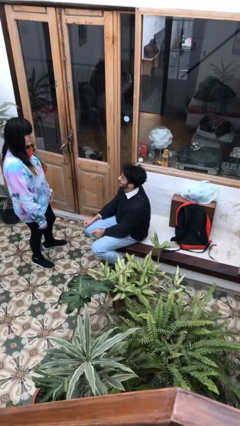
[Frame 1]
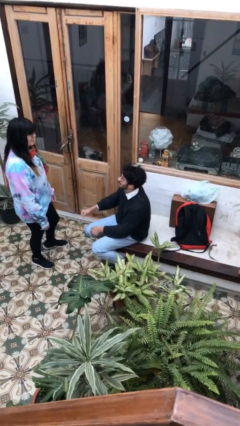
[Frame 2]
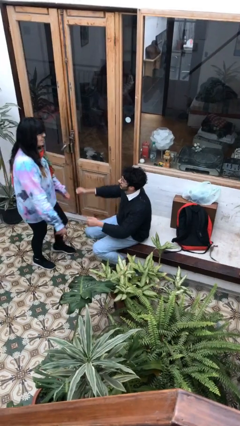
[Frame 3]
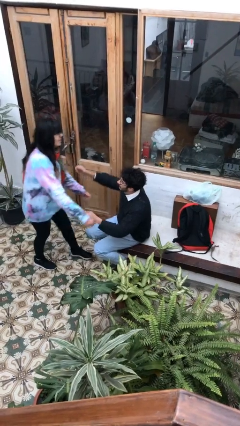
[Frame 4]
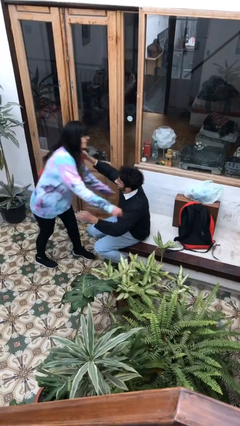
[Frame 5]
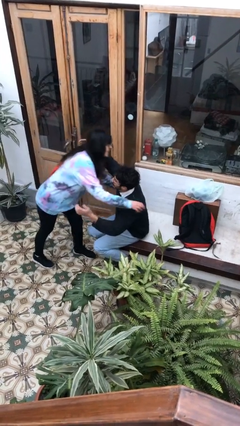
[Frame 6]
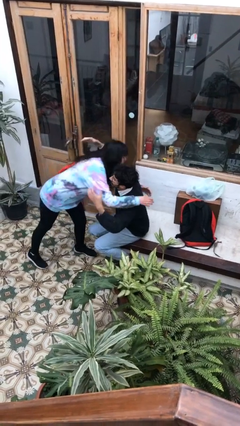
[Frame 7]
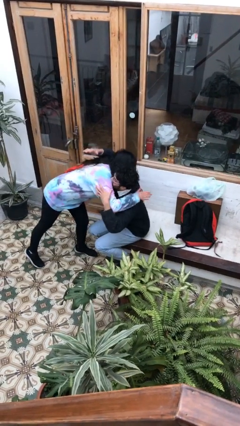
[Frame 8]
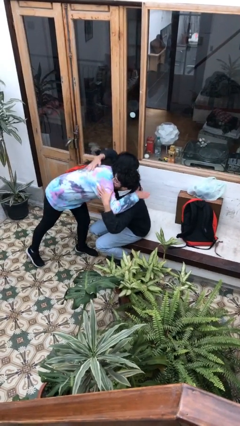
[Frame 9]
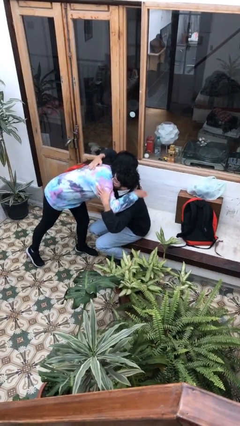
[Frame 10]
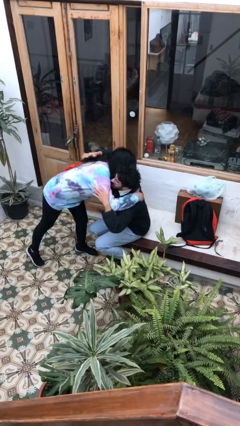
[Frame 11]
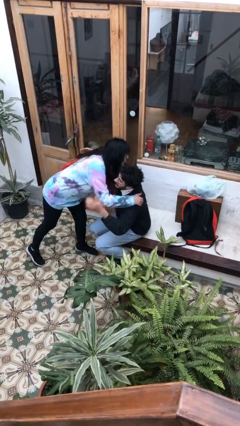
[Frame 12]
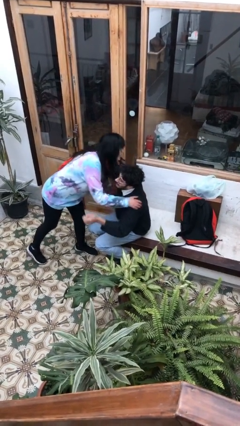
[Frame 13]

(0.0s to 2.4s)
person embraces person

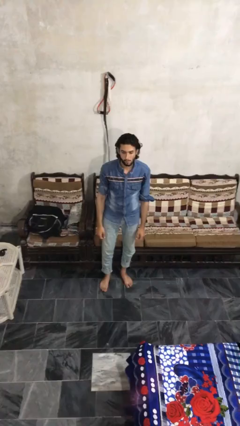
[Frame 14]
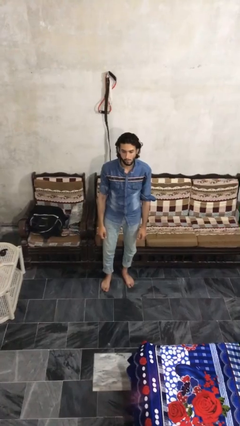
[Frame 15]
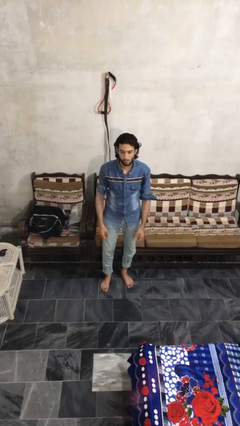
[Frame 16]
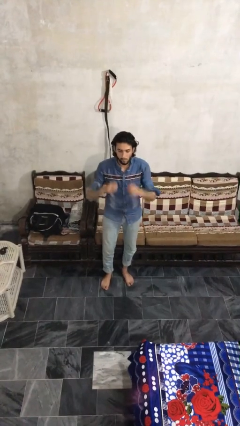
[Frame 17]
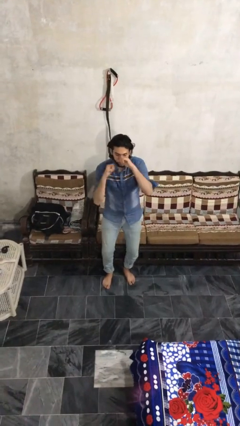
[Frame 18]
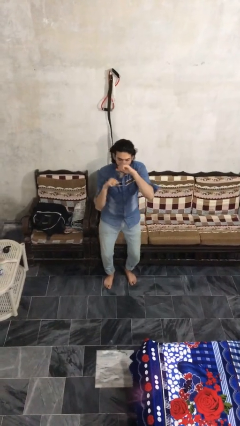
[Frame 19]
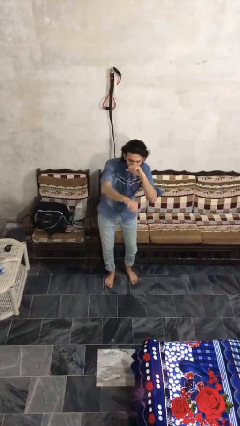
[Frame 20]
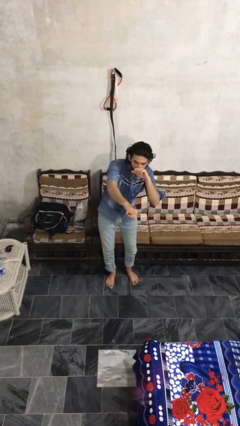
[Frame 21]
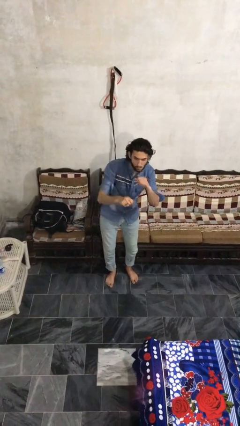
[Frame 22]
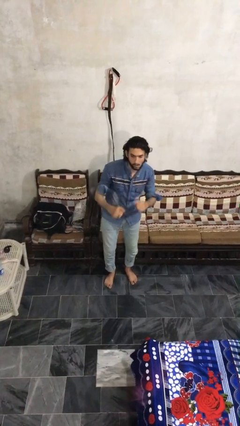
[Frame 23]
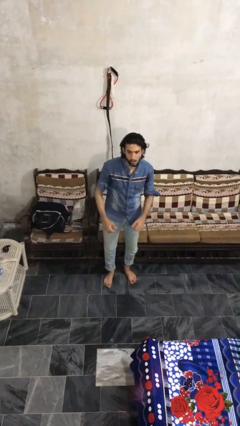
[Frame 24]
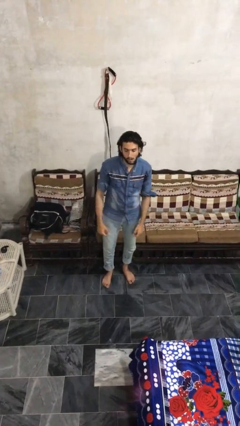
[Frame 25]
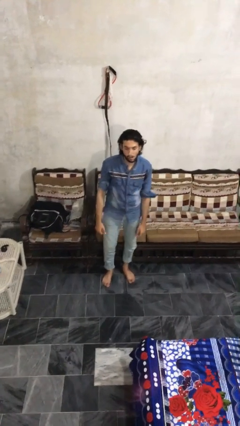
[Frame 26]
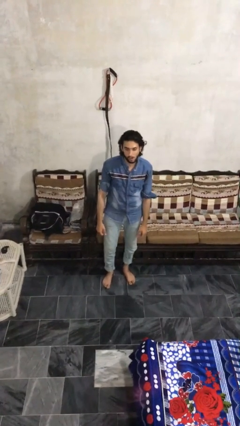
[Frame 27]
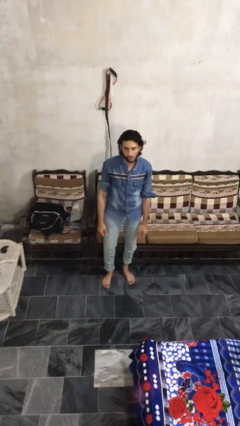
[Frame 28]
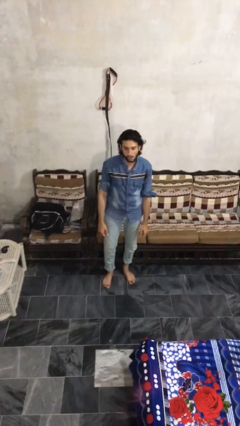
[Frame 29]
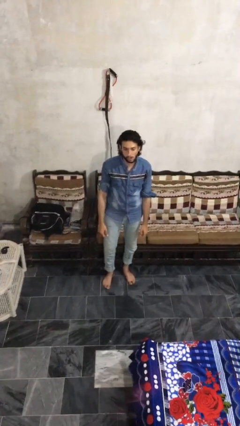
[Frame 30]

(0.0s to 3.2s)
person punches

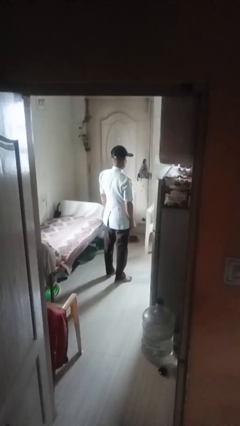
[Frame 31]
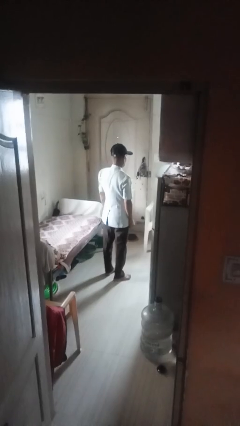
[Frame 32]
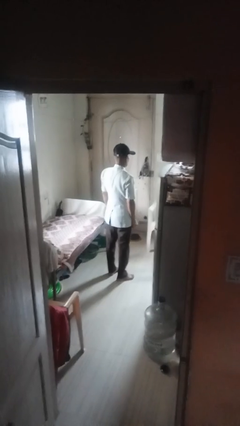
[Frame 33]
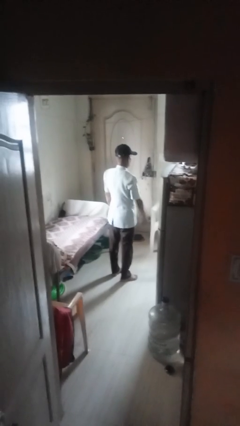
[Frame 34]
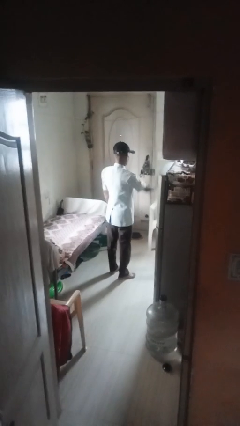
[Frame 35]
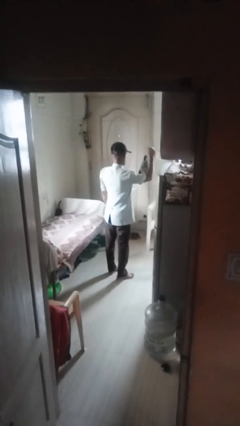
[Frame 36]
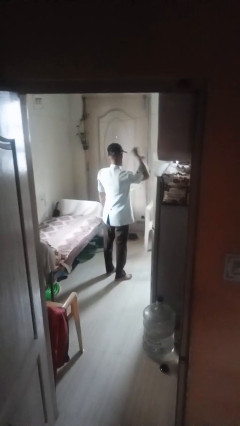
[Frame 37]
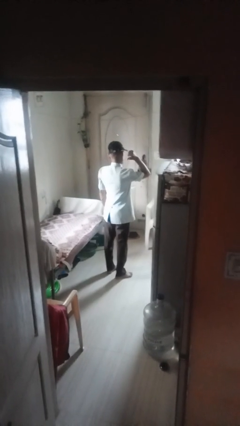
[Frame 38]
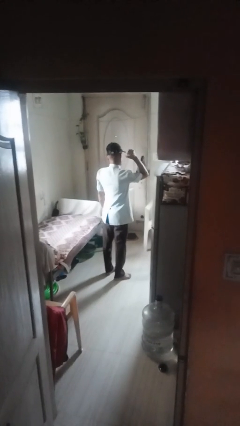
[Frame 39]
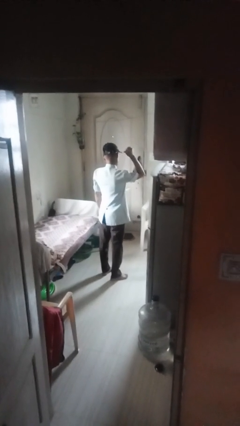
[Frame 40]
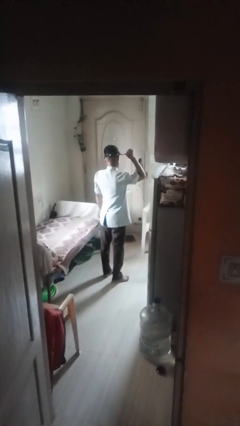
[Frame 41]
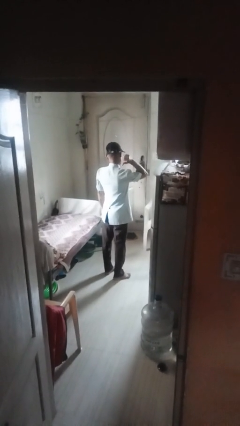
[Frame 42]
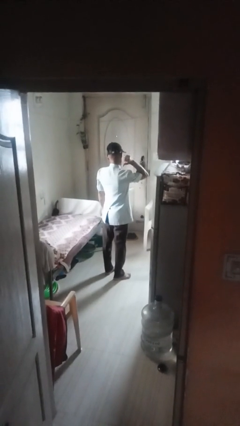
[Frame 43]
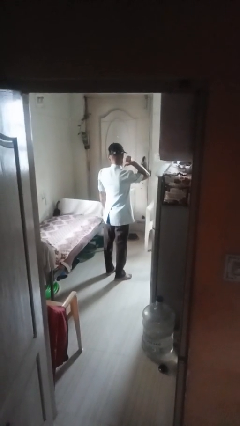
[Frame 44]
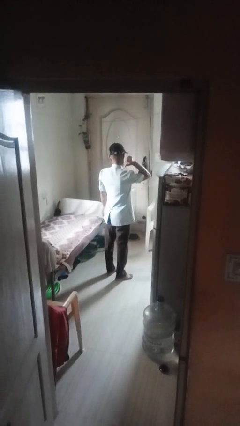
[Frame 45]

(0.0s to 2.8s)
person gestures behind me

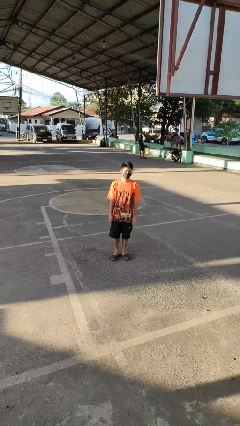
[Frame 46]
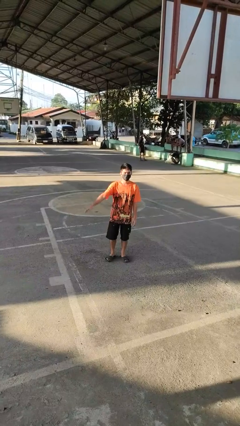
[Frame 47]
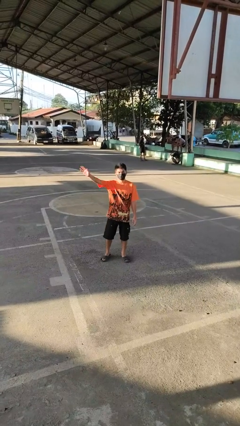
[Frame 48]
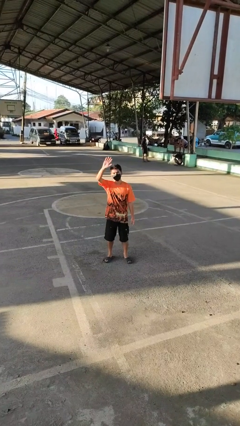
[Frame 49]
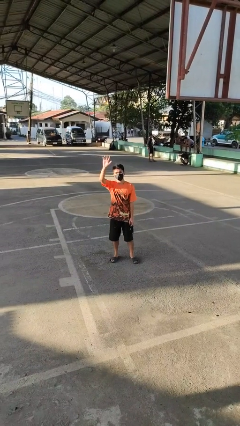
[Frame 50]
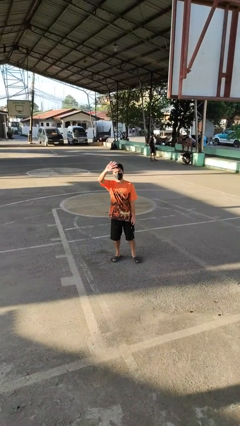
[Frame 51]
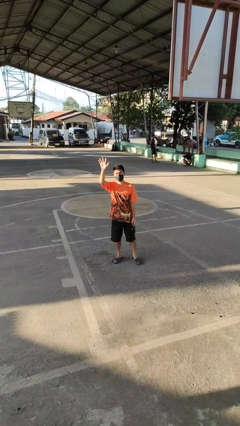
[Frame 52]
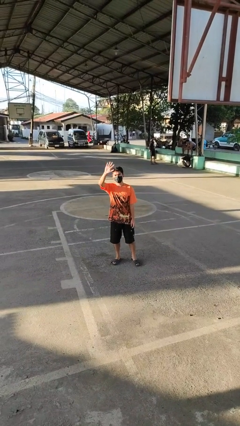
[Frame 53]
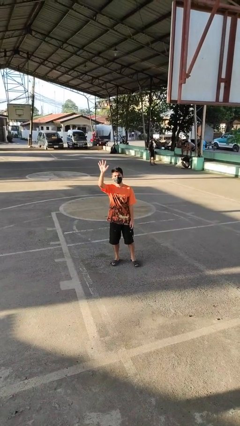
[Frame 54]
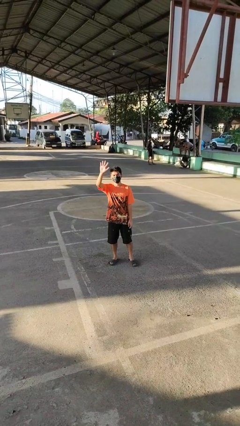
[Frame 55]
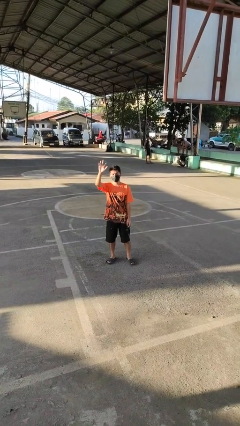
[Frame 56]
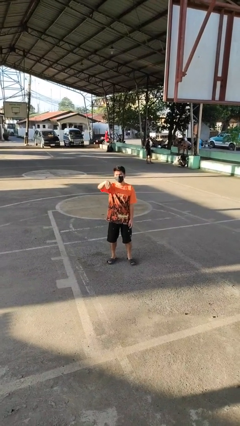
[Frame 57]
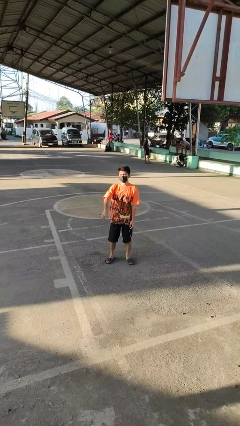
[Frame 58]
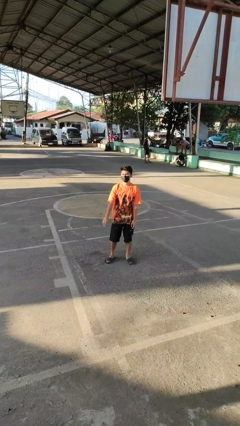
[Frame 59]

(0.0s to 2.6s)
person waves at person

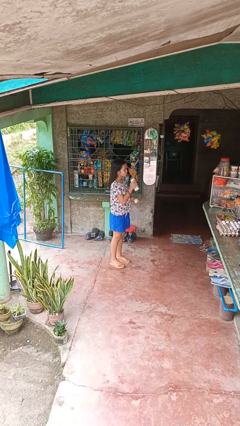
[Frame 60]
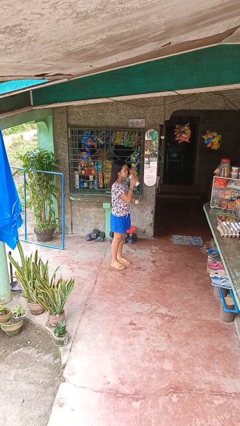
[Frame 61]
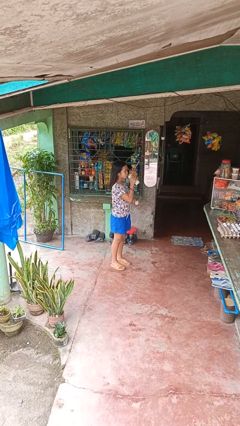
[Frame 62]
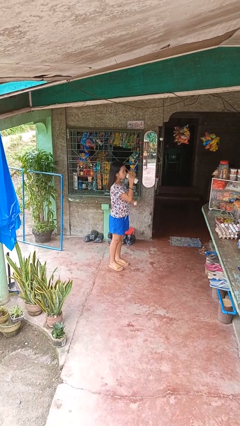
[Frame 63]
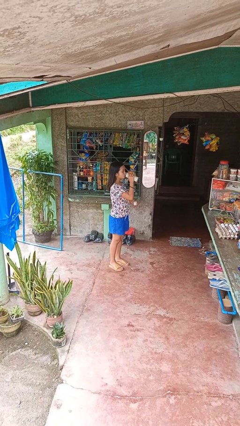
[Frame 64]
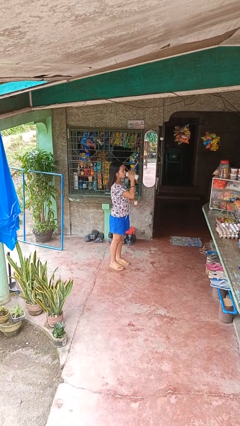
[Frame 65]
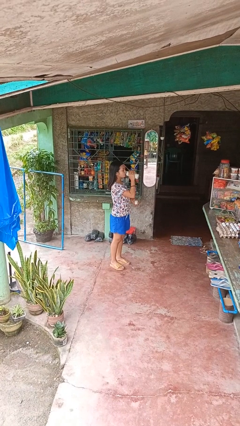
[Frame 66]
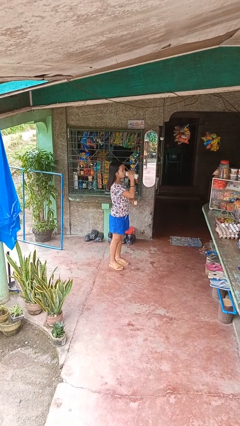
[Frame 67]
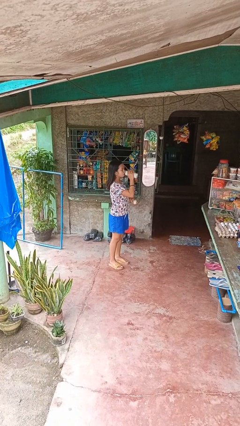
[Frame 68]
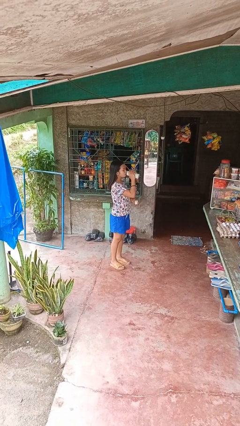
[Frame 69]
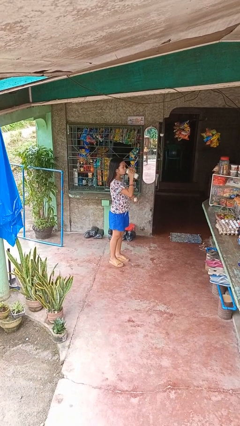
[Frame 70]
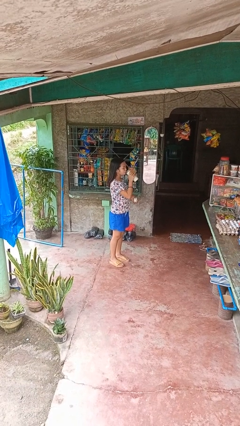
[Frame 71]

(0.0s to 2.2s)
person drinks from bottle

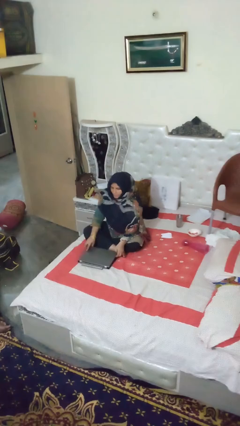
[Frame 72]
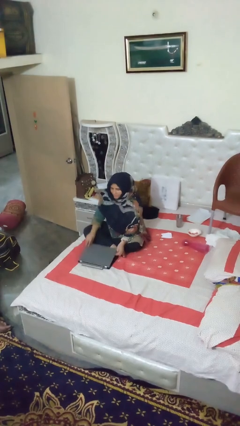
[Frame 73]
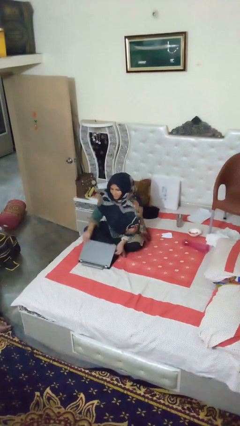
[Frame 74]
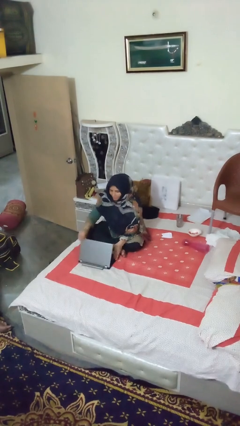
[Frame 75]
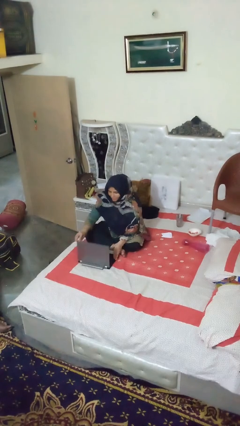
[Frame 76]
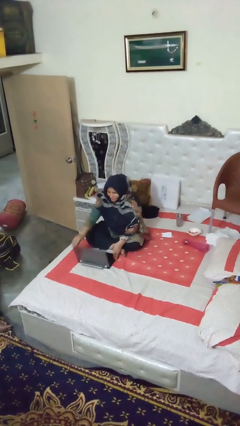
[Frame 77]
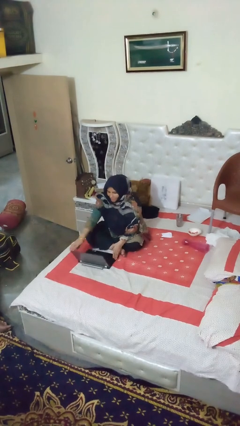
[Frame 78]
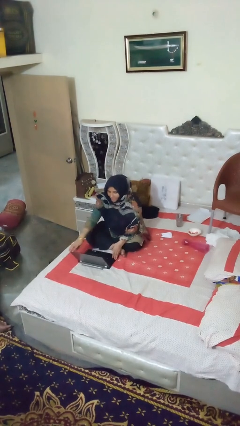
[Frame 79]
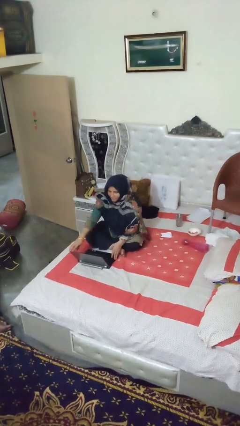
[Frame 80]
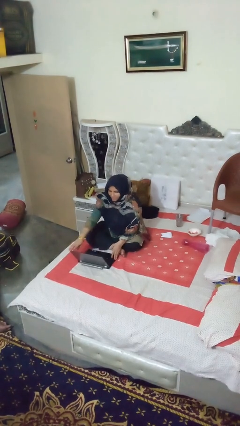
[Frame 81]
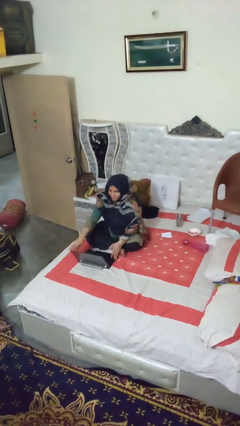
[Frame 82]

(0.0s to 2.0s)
person opens laptop

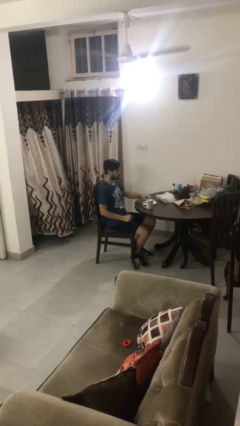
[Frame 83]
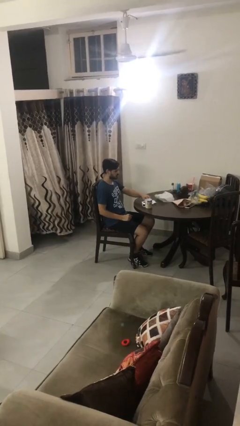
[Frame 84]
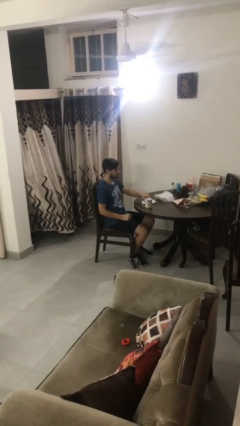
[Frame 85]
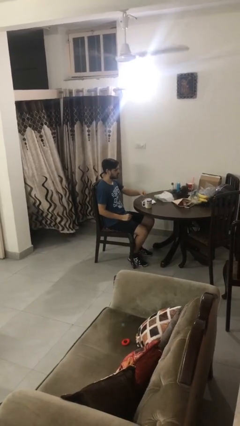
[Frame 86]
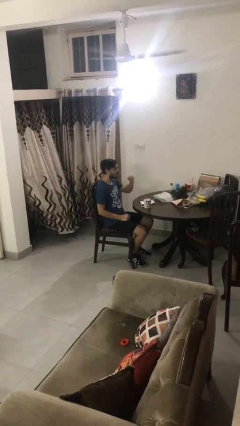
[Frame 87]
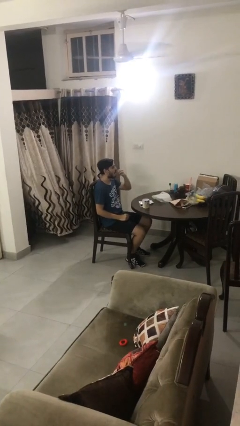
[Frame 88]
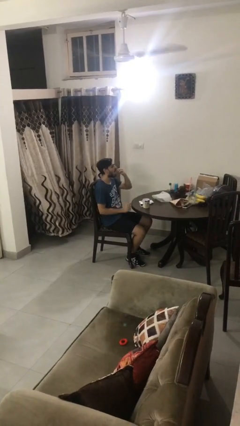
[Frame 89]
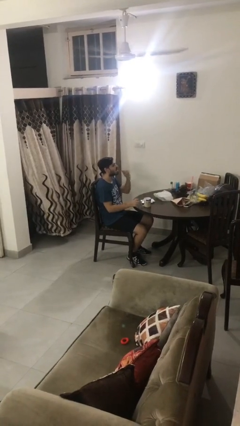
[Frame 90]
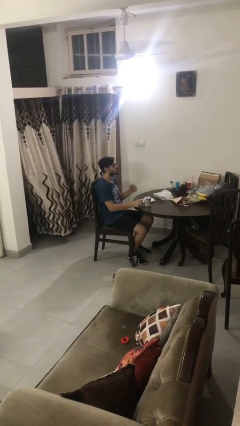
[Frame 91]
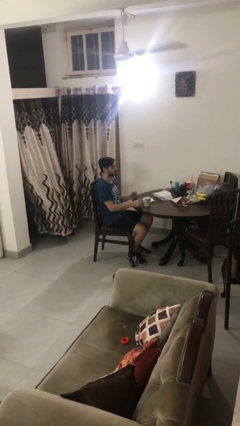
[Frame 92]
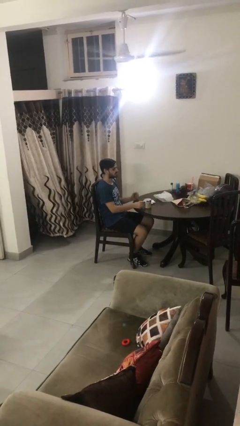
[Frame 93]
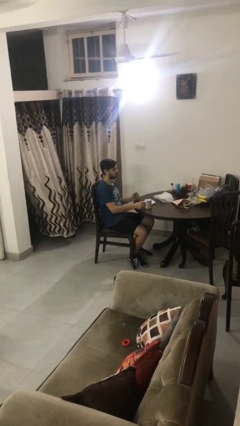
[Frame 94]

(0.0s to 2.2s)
person takes medicine pills
